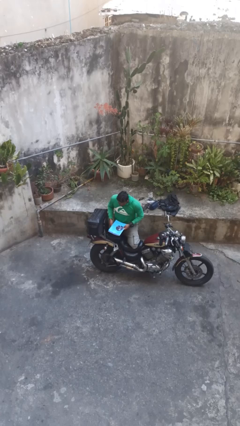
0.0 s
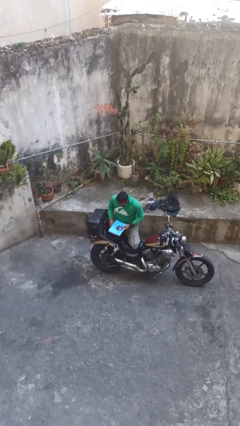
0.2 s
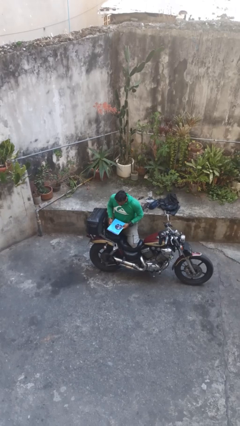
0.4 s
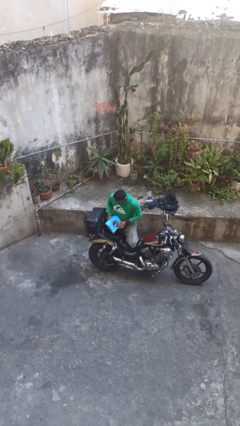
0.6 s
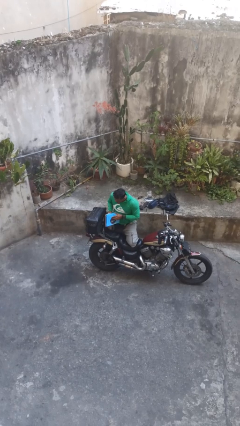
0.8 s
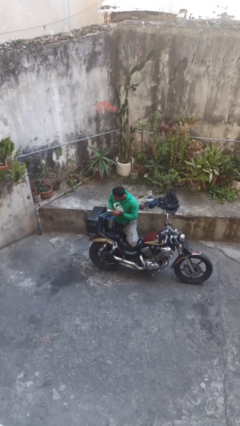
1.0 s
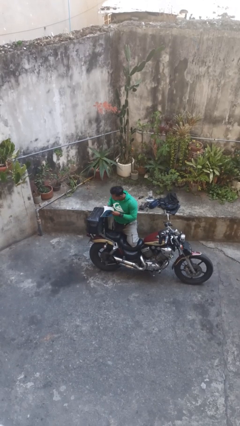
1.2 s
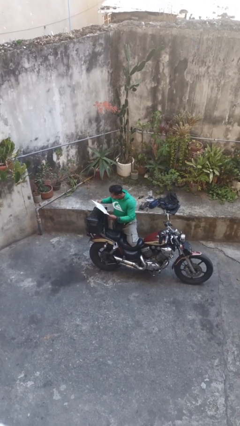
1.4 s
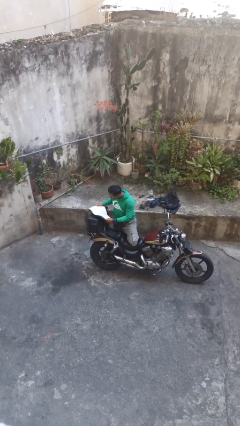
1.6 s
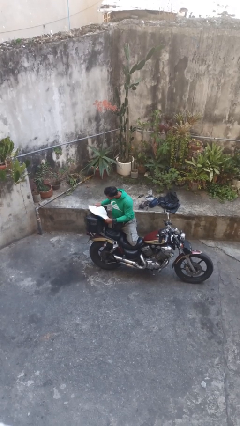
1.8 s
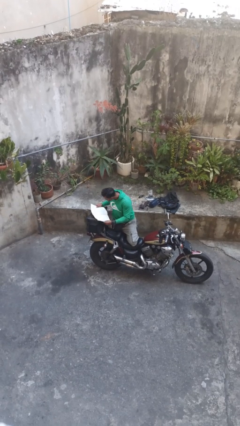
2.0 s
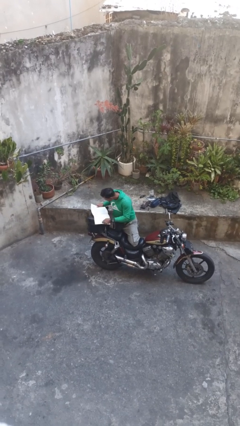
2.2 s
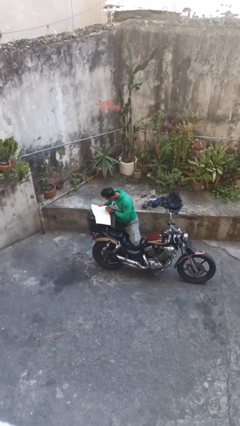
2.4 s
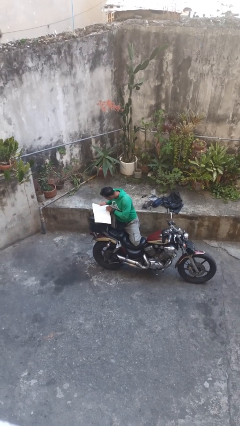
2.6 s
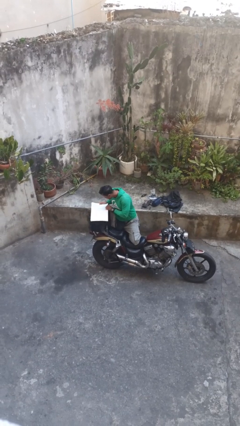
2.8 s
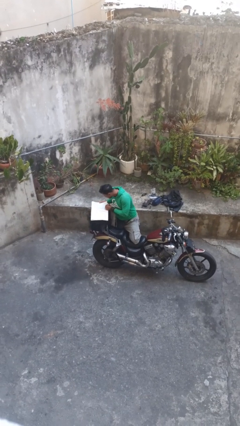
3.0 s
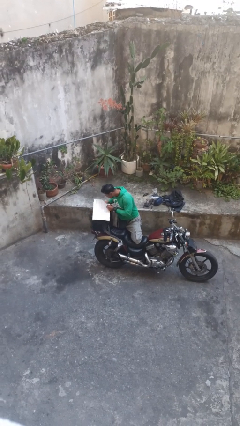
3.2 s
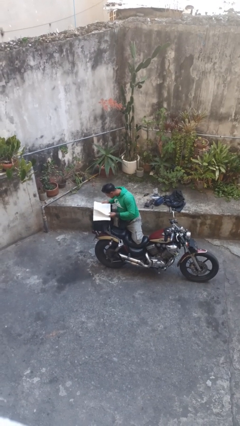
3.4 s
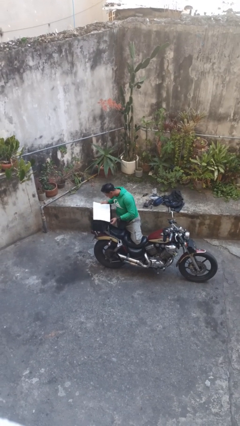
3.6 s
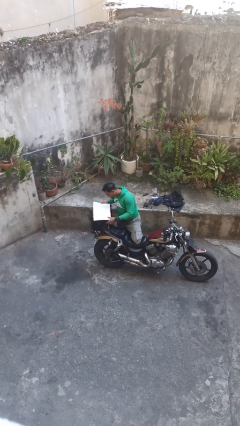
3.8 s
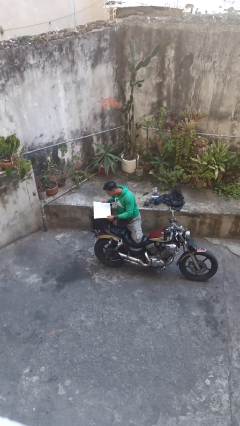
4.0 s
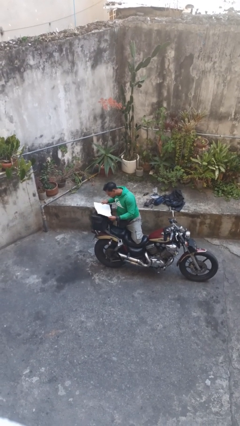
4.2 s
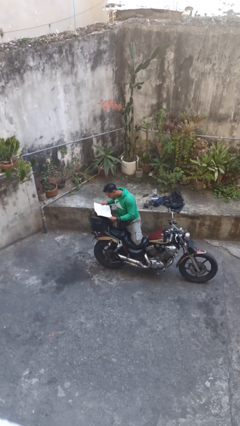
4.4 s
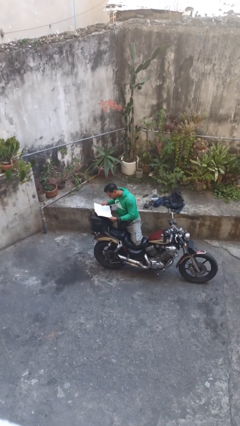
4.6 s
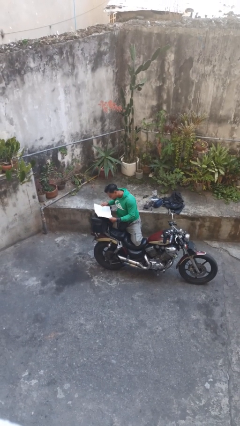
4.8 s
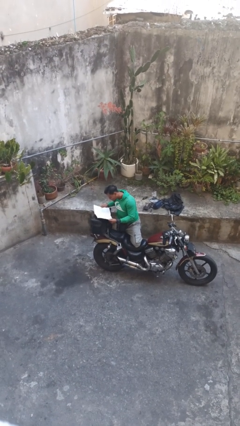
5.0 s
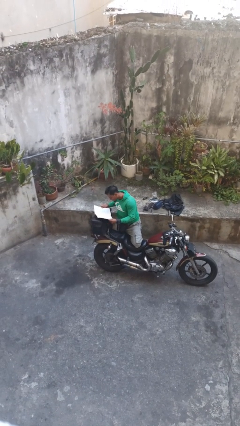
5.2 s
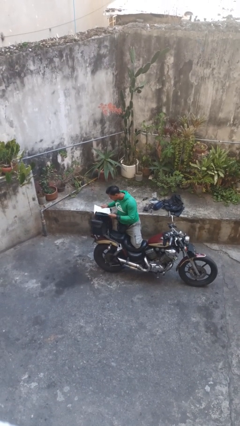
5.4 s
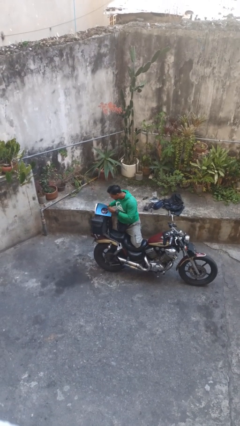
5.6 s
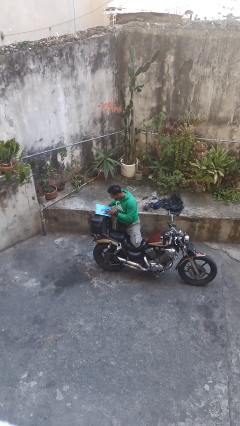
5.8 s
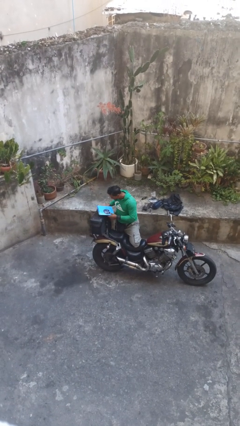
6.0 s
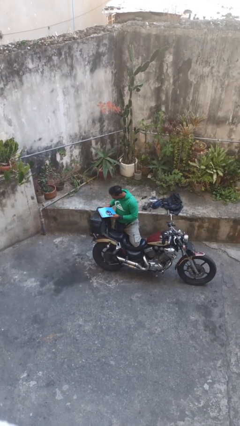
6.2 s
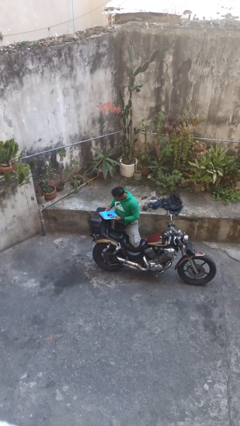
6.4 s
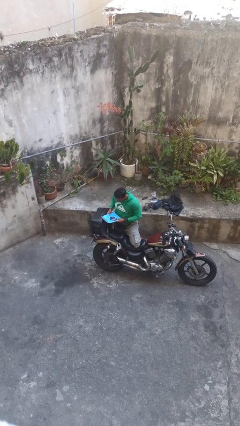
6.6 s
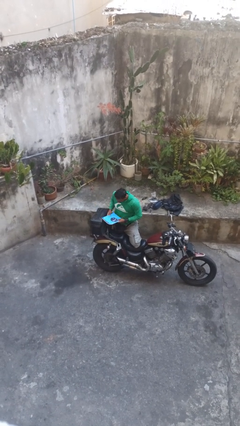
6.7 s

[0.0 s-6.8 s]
person reads document

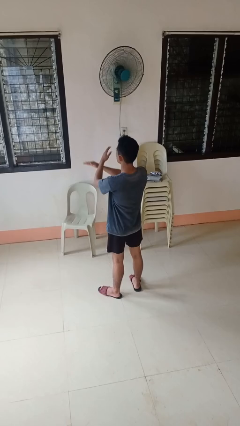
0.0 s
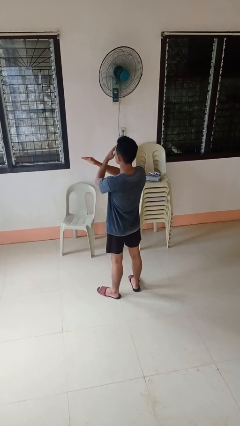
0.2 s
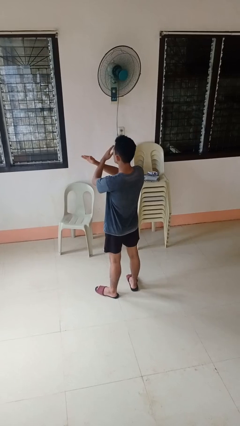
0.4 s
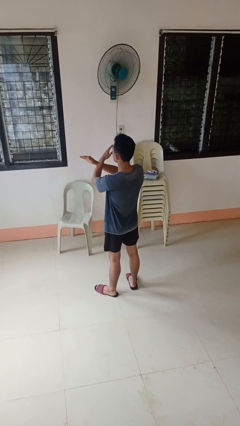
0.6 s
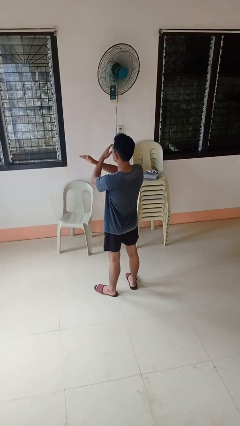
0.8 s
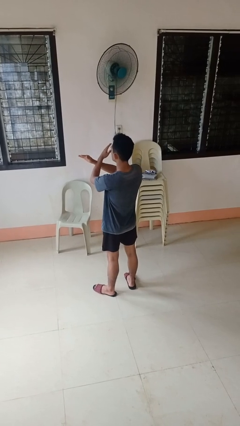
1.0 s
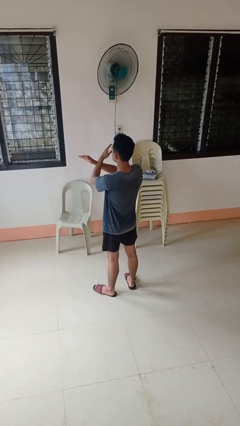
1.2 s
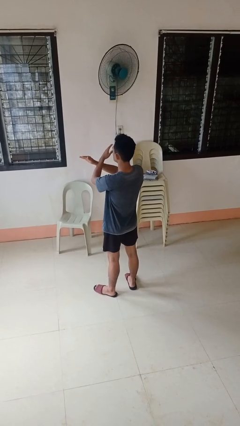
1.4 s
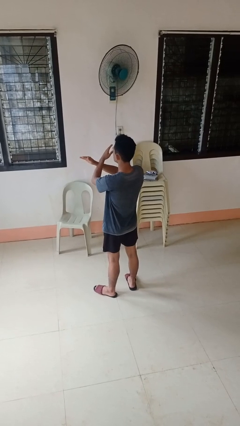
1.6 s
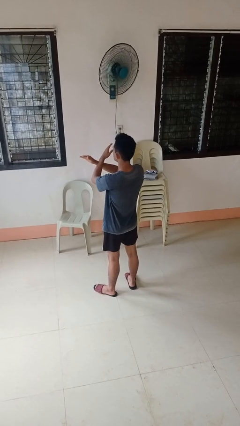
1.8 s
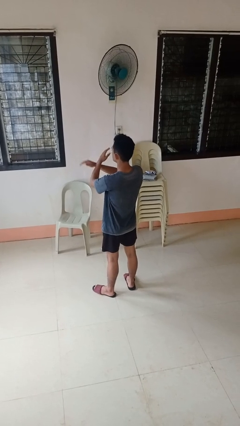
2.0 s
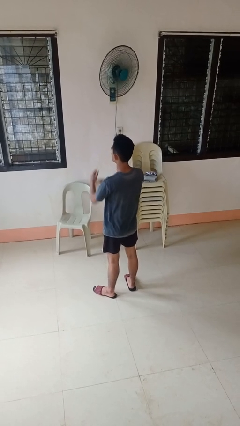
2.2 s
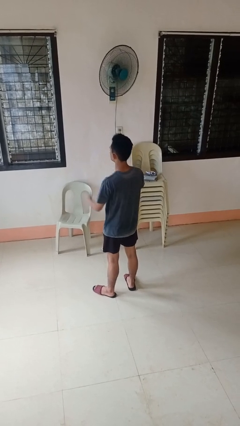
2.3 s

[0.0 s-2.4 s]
person gestures arms x

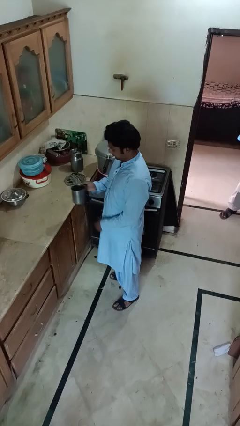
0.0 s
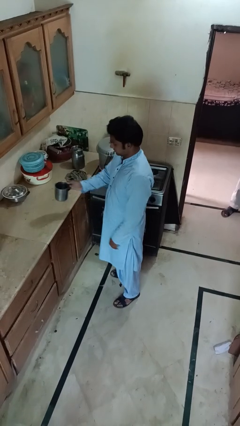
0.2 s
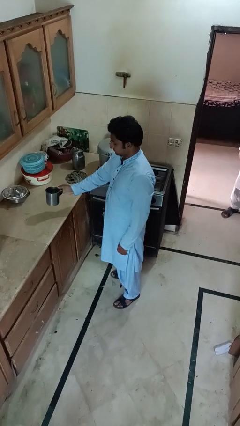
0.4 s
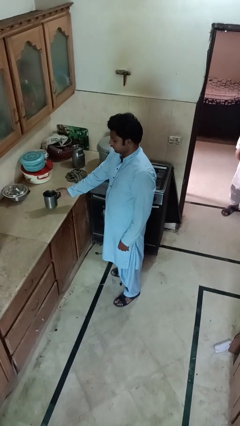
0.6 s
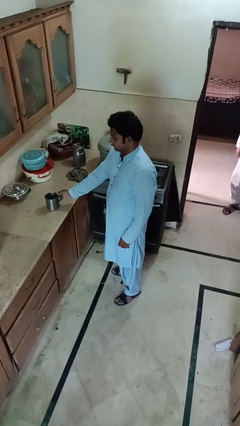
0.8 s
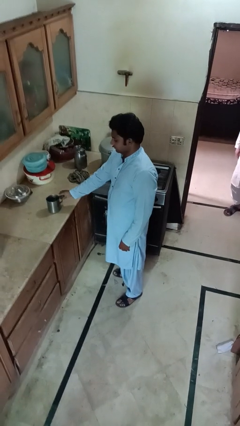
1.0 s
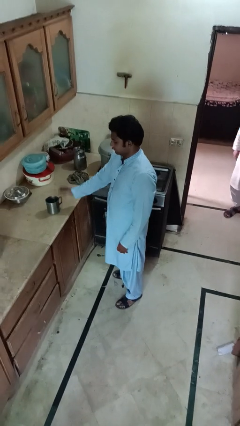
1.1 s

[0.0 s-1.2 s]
person puts down object on countertop

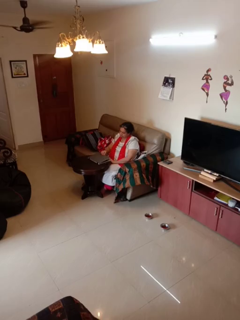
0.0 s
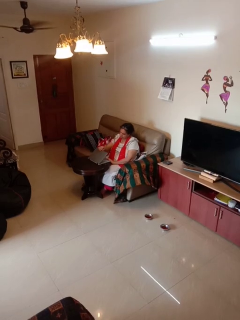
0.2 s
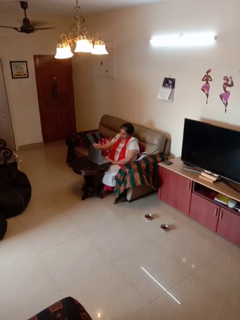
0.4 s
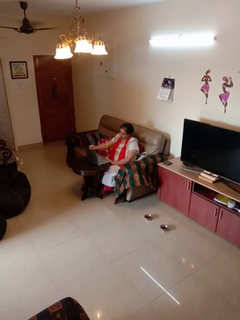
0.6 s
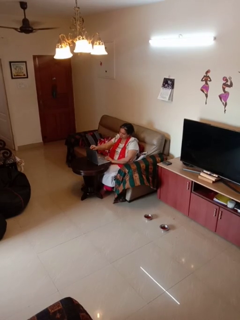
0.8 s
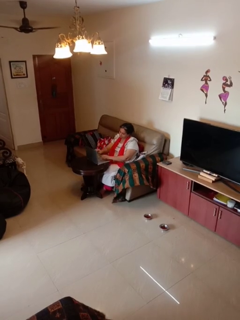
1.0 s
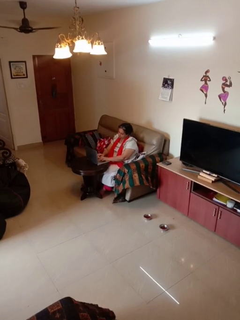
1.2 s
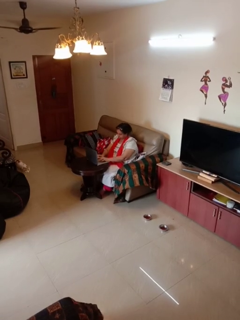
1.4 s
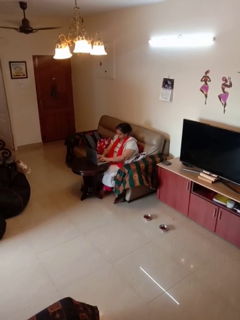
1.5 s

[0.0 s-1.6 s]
person opens laptop

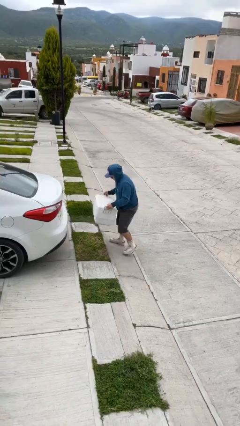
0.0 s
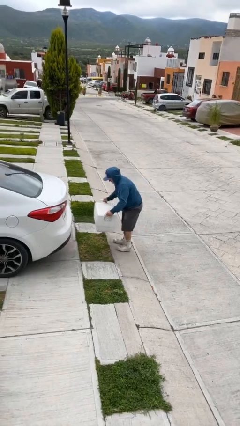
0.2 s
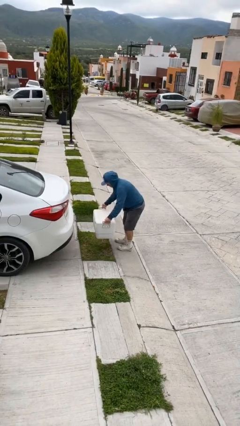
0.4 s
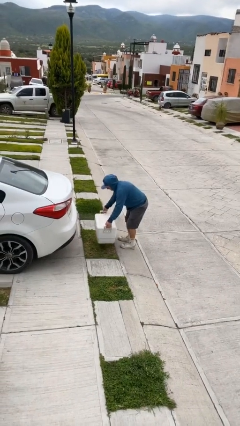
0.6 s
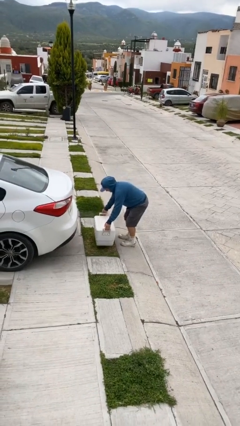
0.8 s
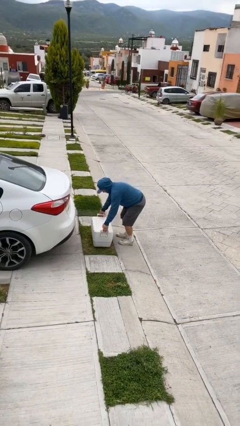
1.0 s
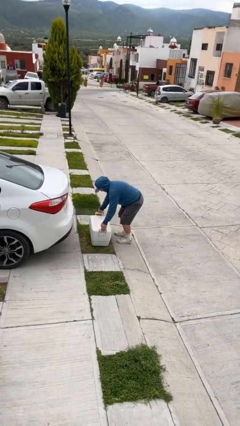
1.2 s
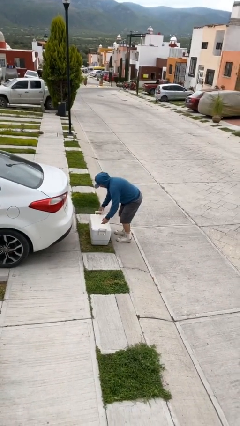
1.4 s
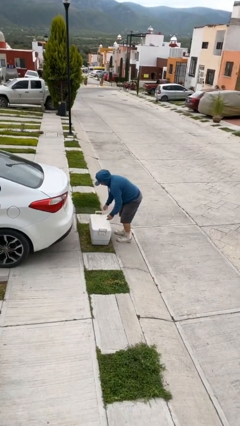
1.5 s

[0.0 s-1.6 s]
person puts down object on floor

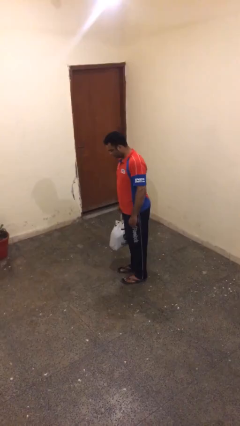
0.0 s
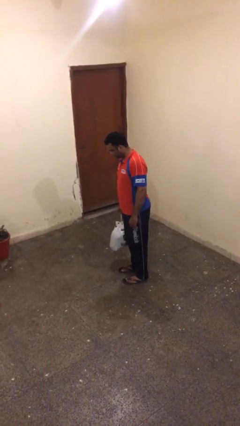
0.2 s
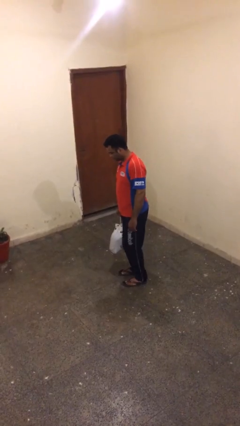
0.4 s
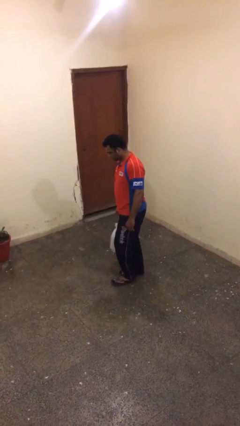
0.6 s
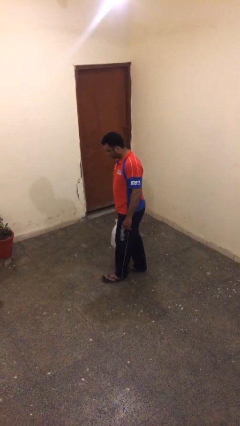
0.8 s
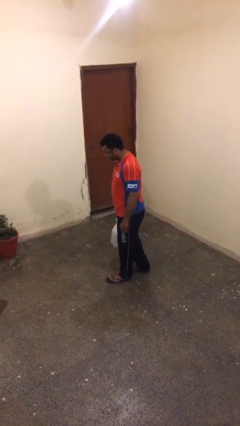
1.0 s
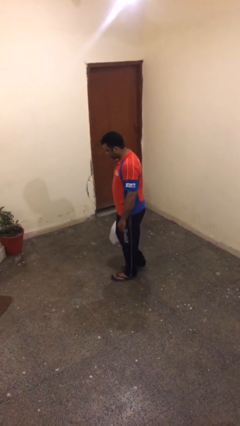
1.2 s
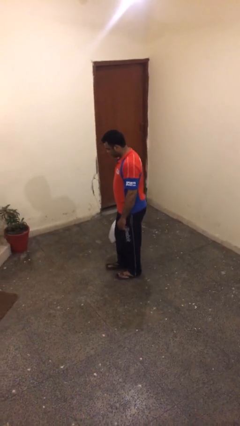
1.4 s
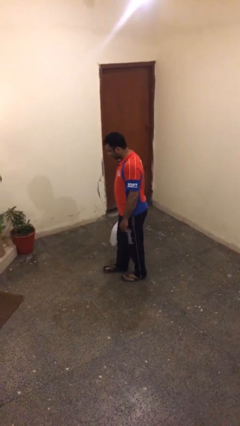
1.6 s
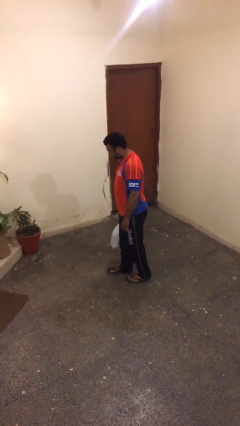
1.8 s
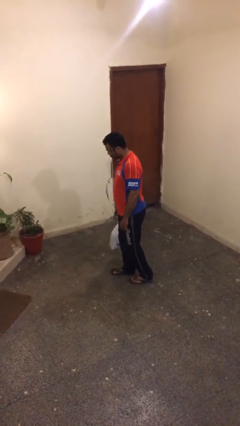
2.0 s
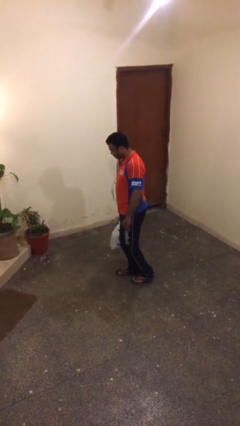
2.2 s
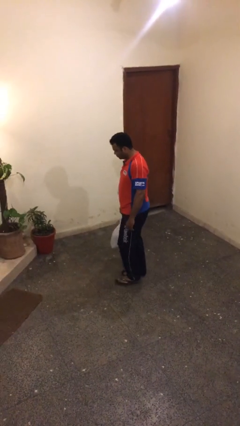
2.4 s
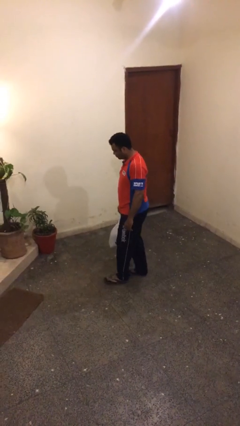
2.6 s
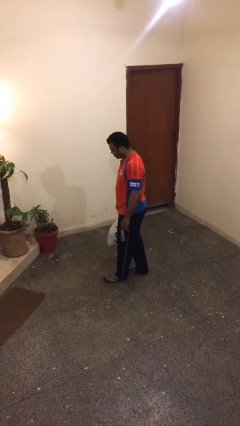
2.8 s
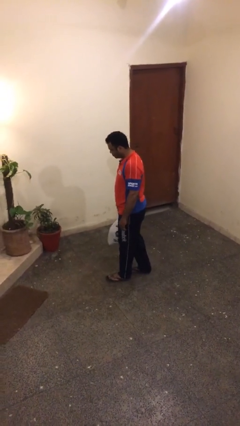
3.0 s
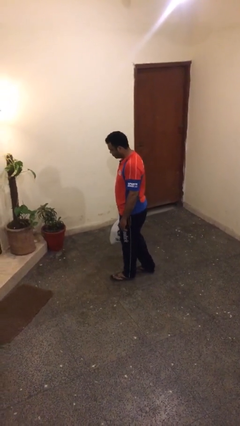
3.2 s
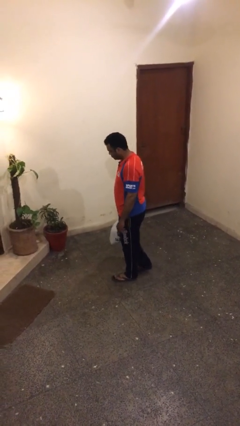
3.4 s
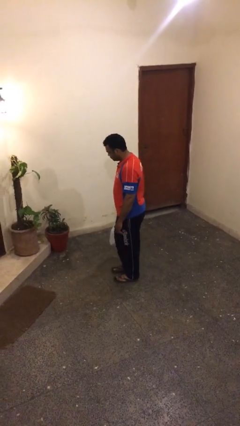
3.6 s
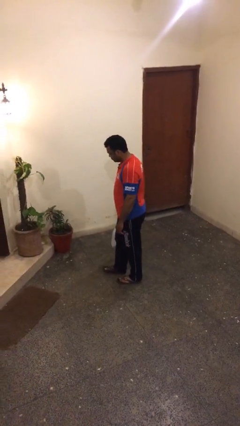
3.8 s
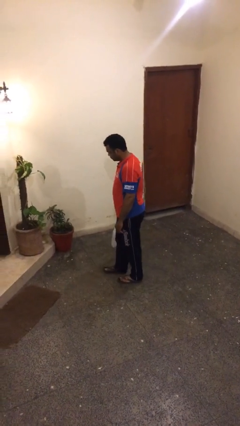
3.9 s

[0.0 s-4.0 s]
person carries heavy object

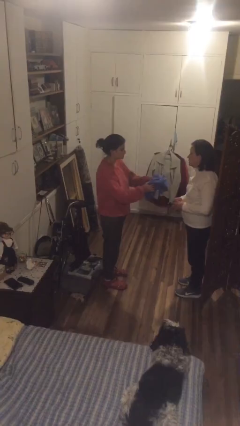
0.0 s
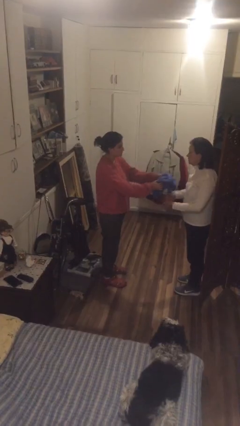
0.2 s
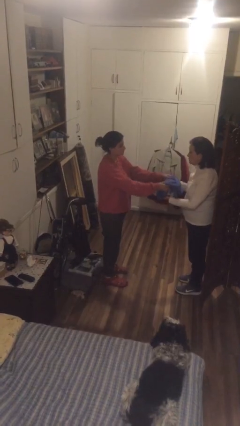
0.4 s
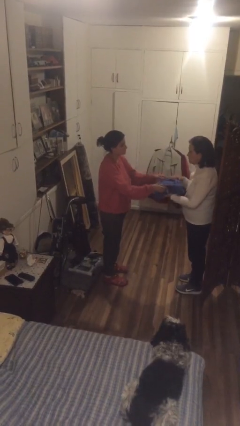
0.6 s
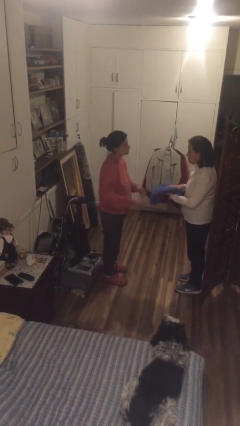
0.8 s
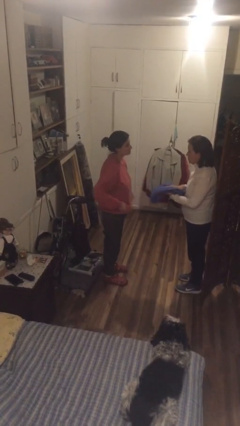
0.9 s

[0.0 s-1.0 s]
person transfers object to person
